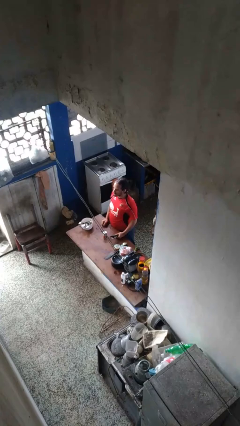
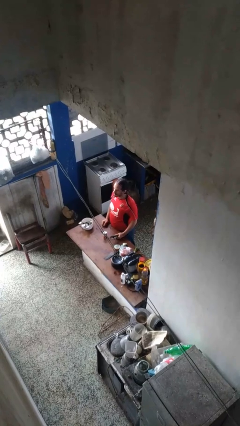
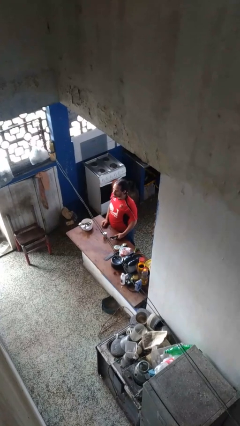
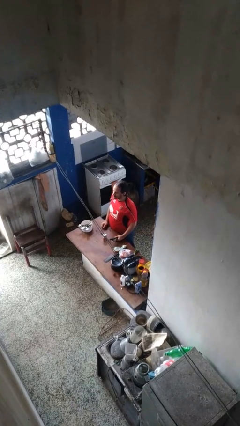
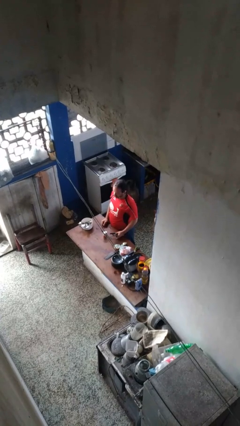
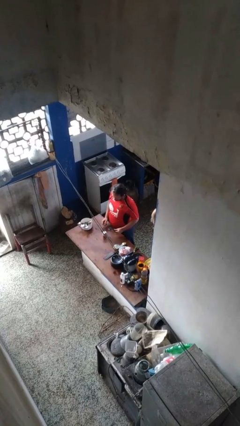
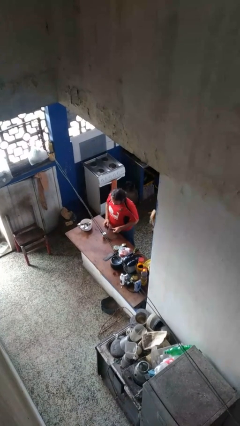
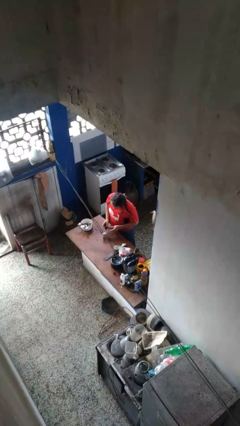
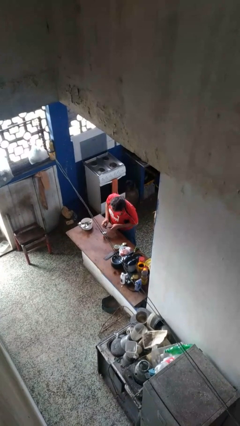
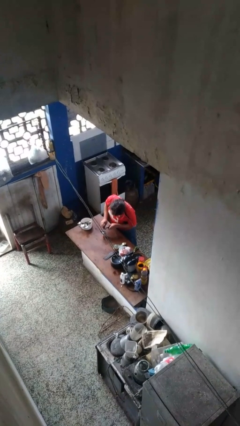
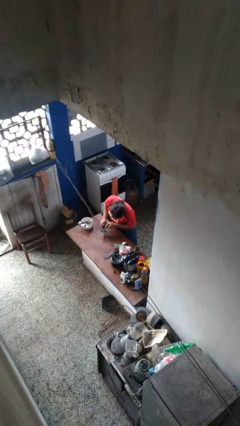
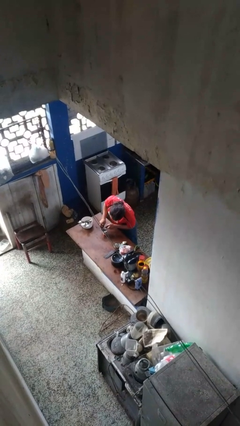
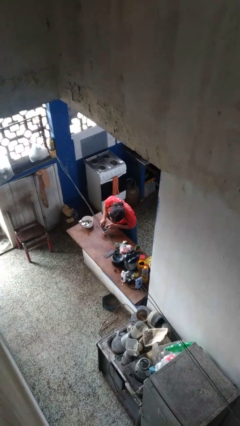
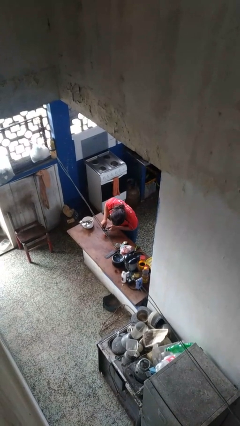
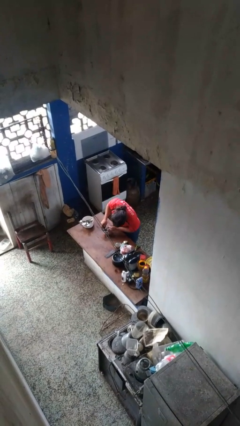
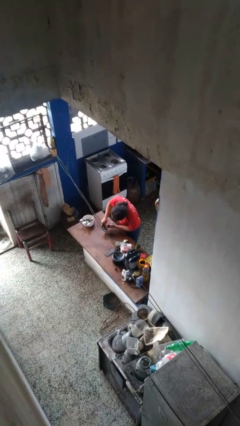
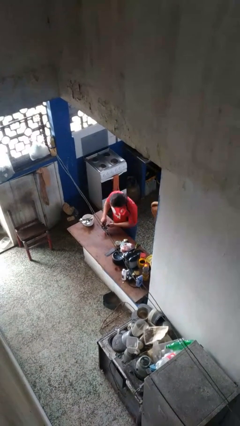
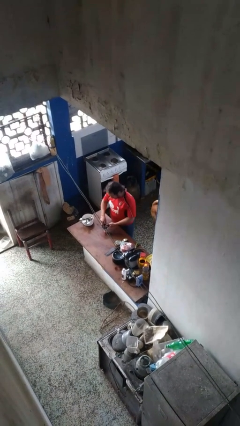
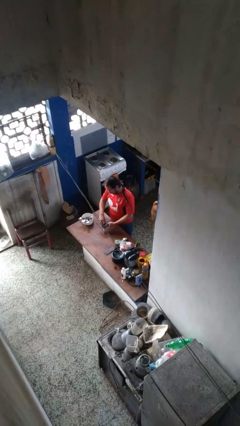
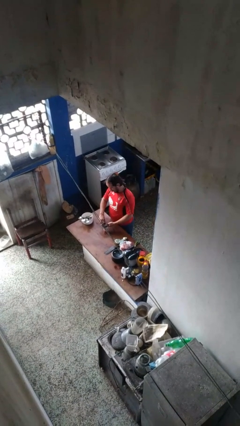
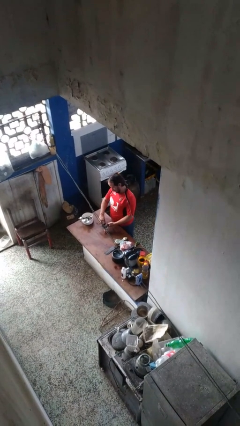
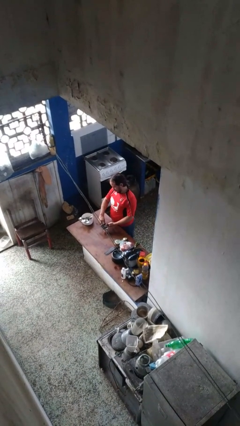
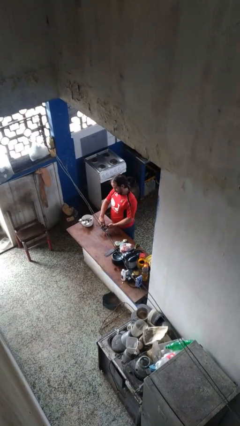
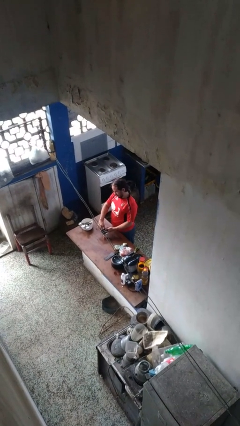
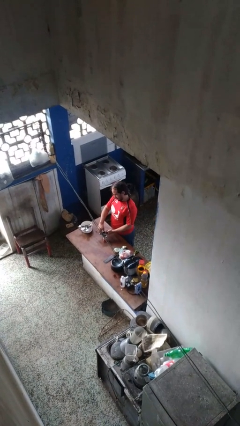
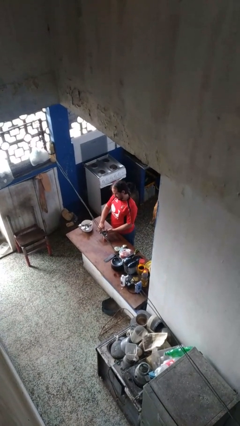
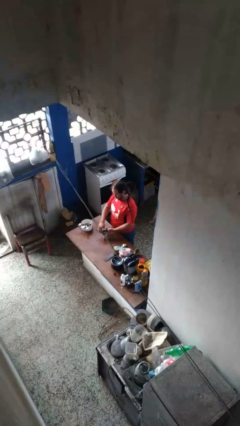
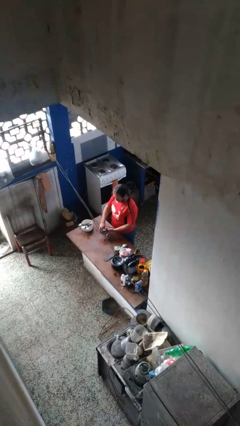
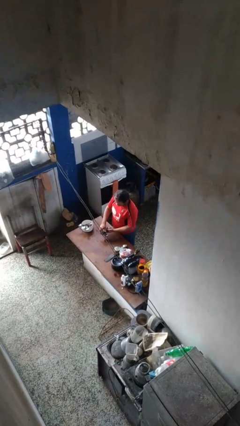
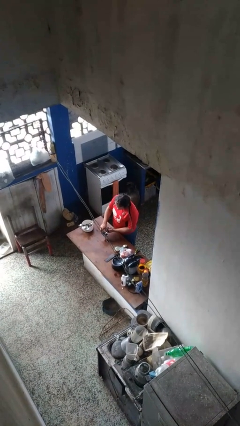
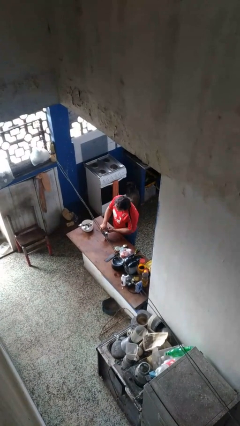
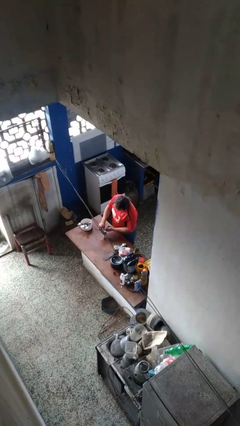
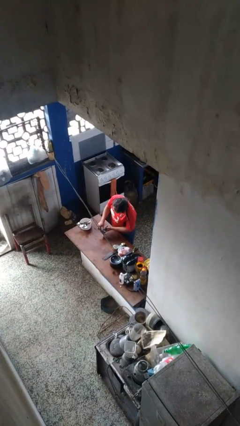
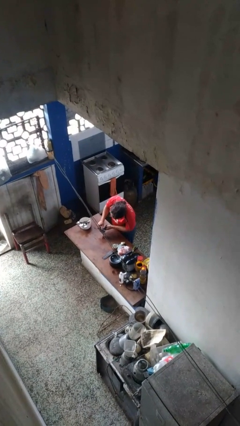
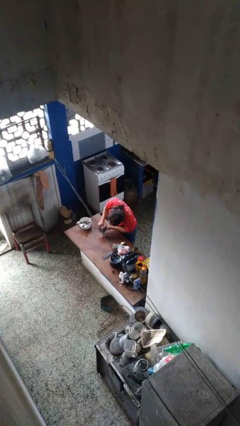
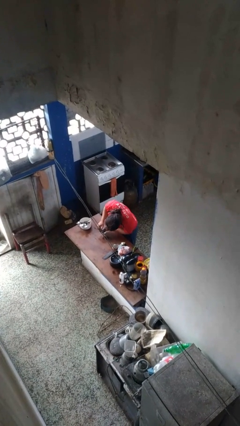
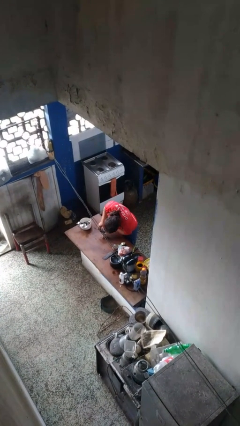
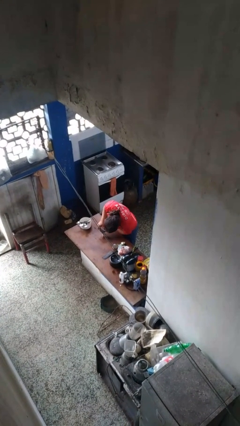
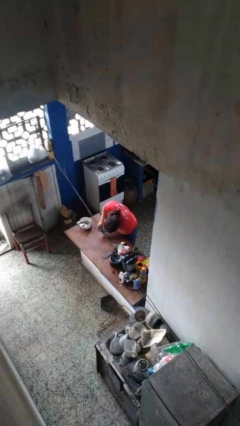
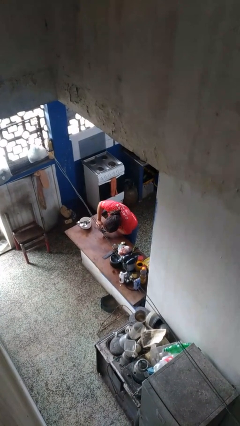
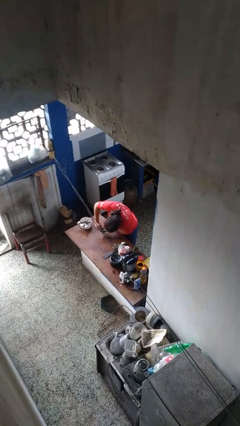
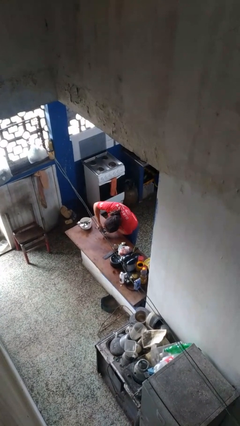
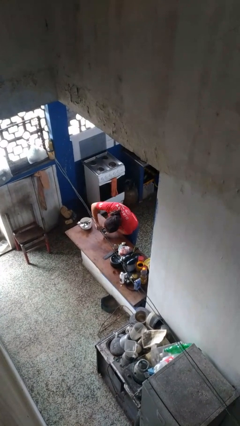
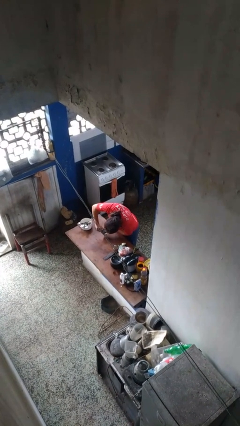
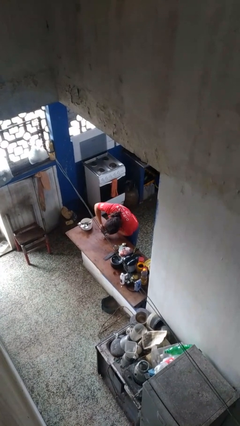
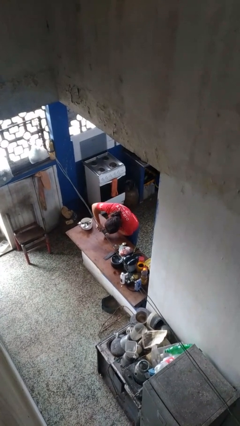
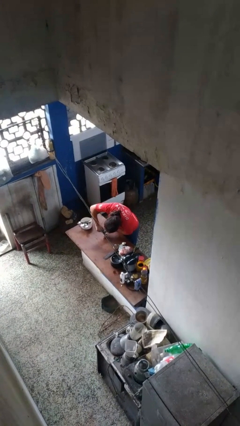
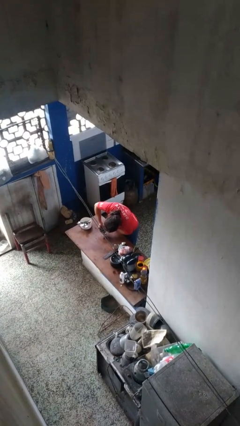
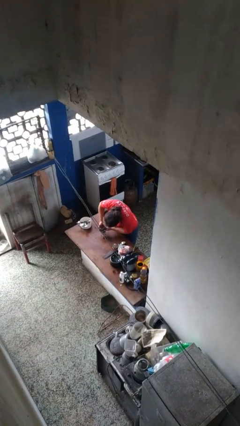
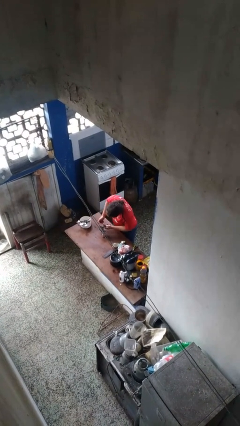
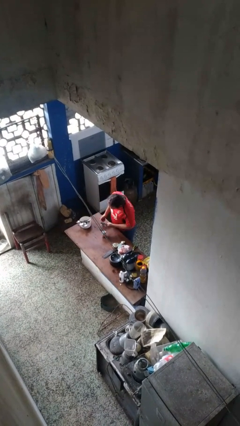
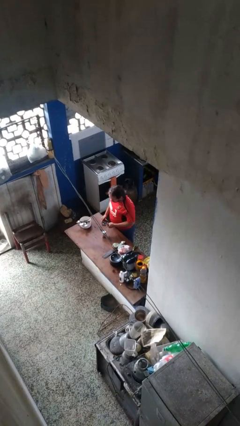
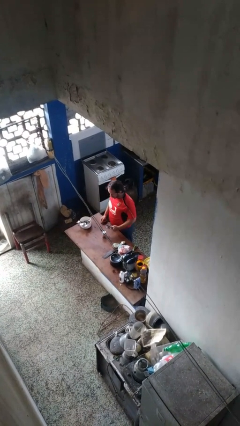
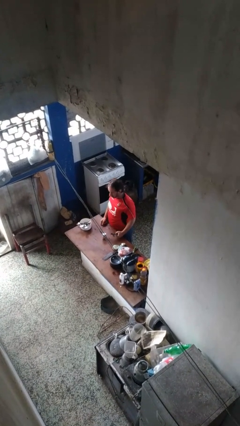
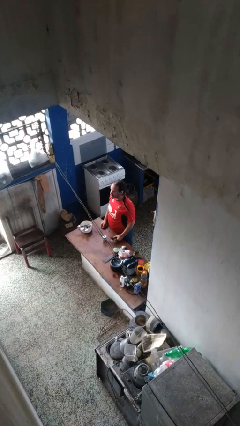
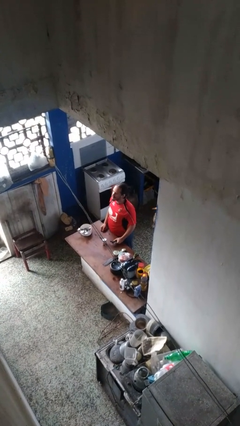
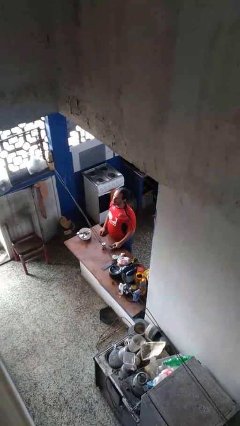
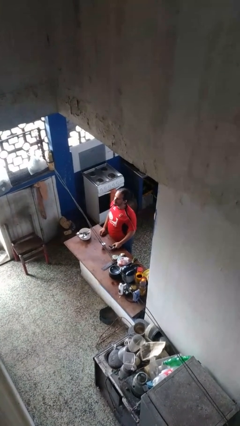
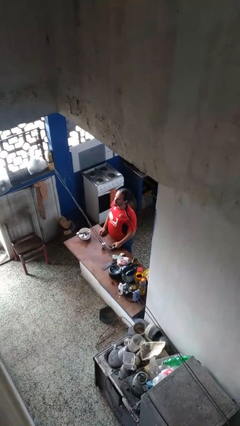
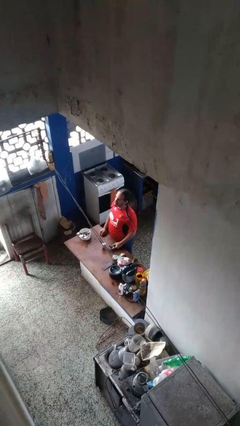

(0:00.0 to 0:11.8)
person opens can with can opener

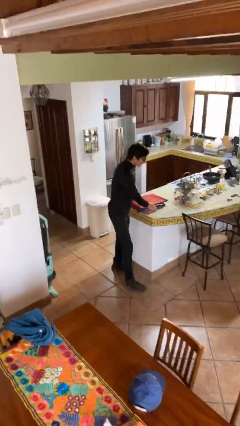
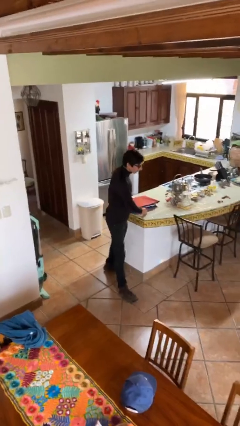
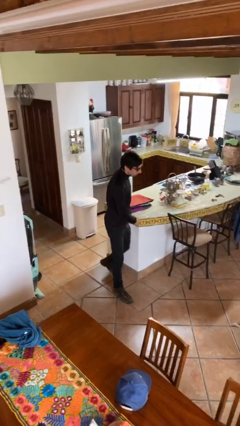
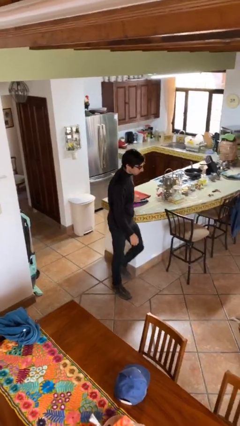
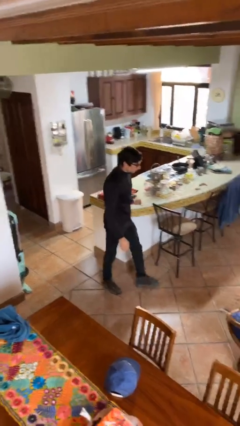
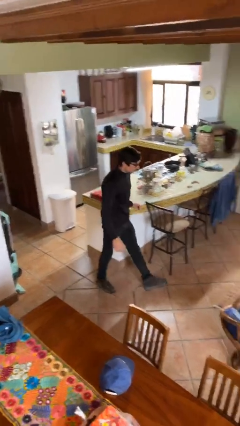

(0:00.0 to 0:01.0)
person puts down object on table

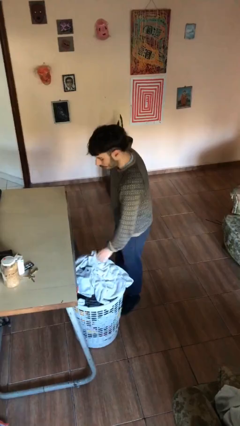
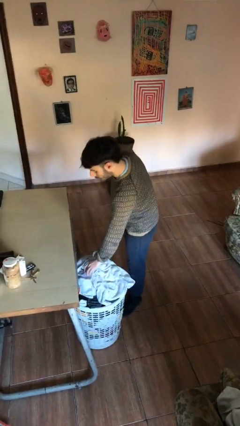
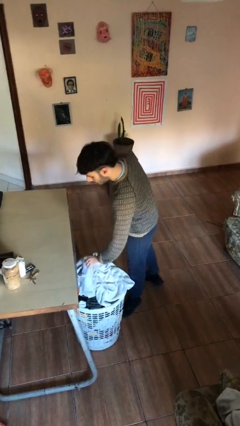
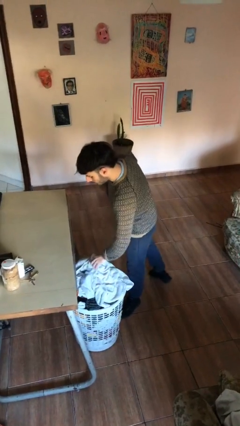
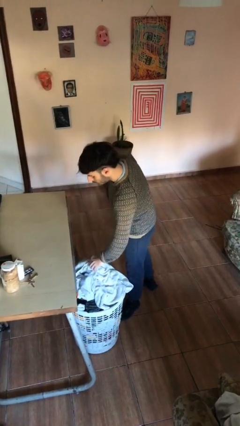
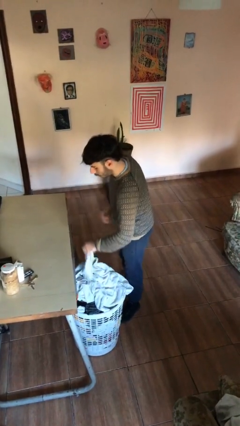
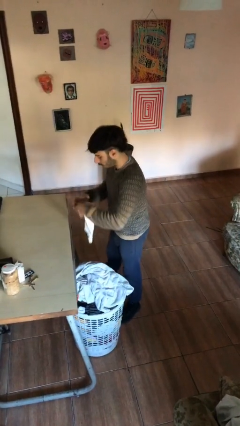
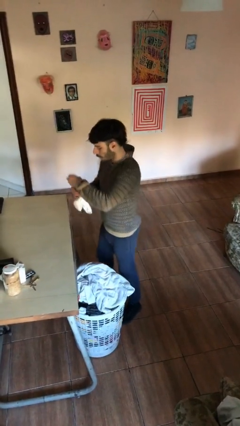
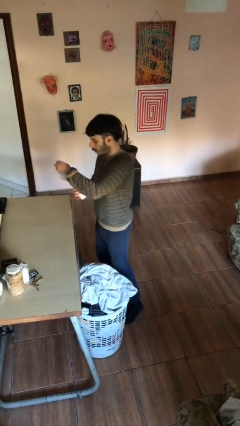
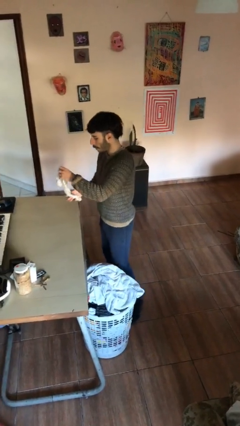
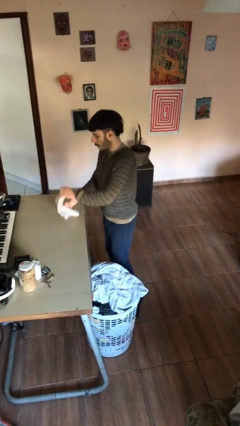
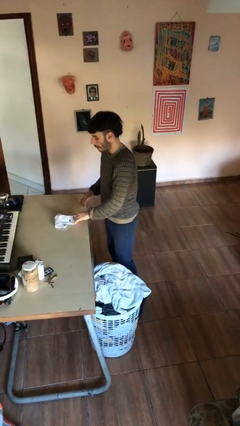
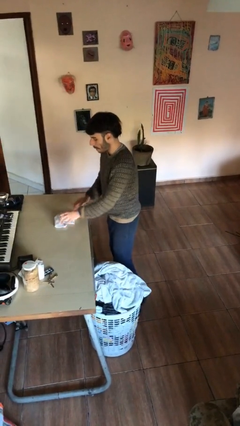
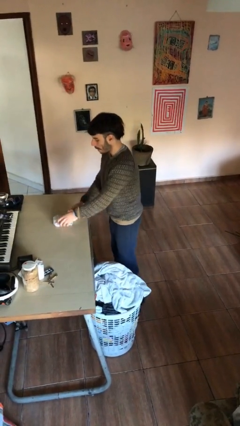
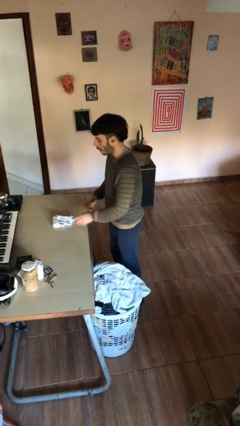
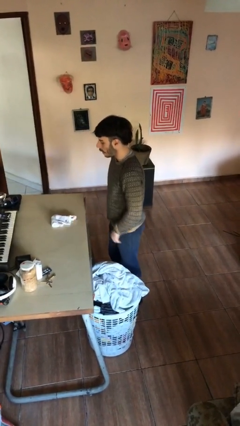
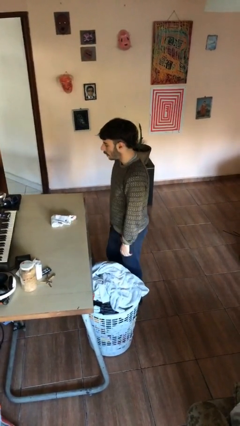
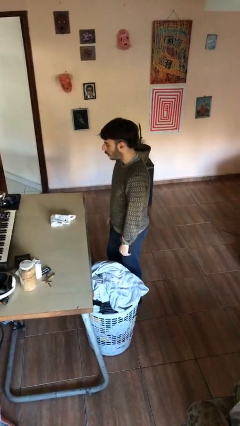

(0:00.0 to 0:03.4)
person folds socks

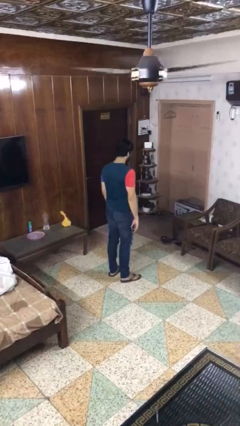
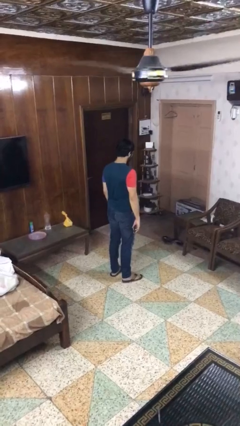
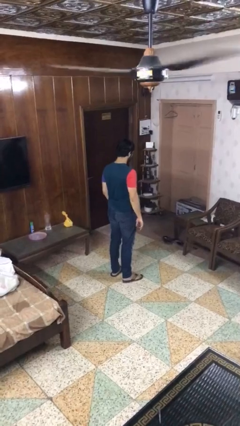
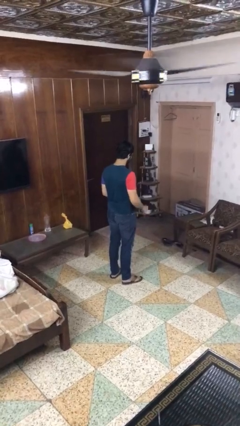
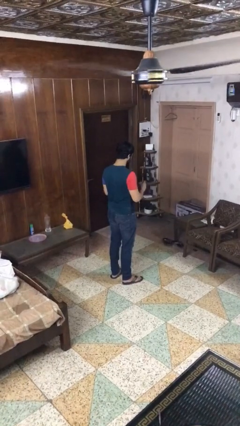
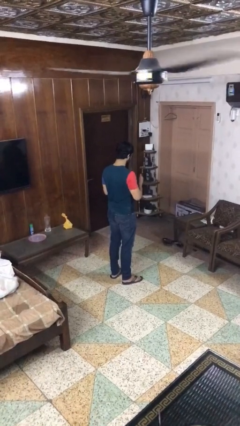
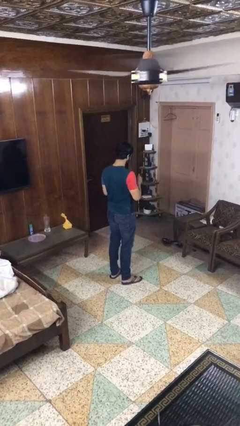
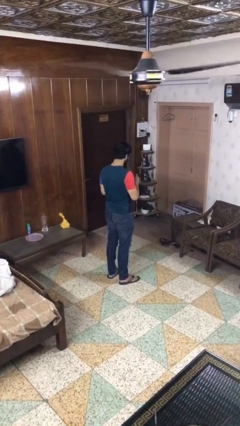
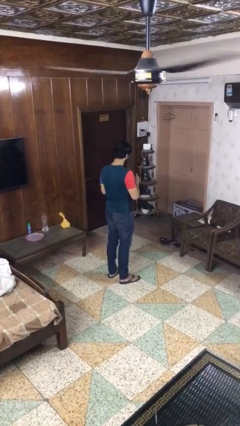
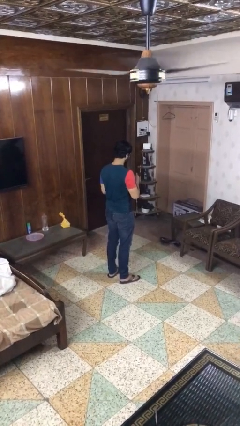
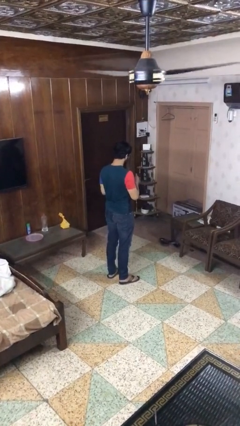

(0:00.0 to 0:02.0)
person clips fingernails
